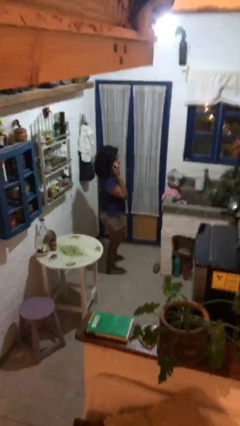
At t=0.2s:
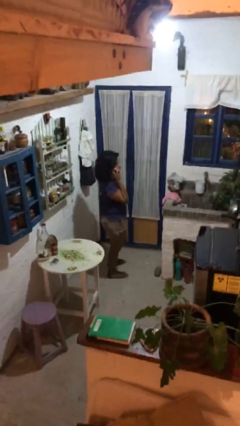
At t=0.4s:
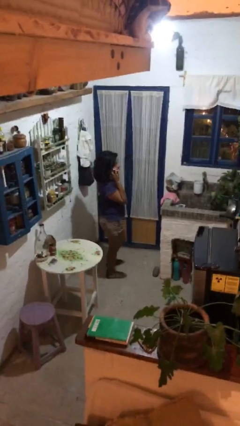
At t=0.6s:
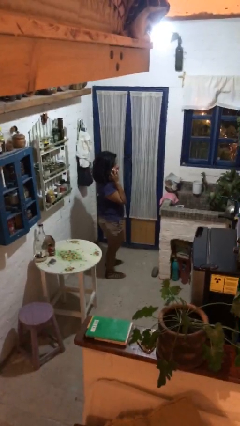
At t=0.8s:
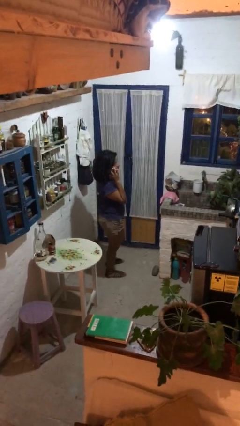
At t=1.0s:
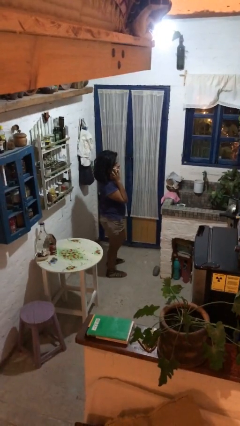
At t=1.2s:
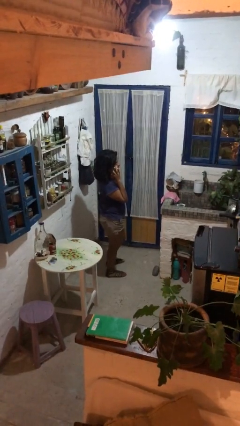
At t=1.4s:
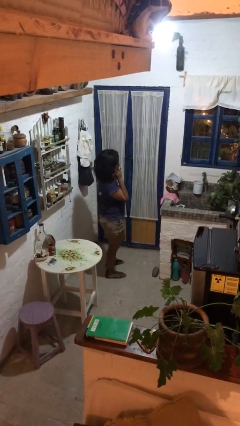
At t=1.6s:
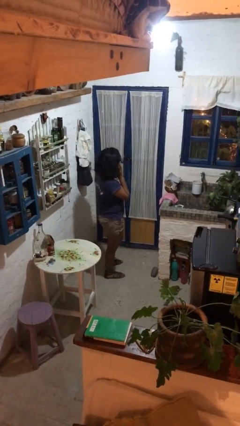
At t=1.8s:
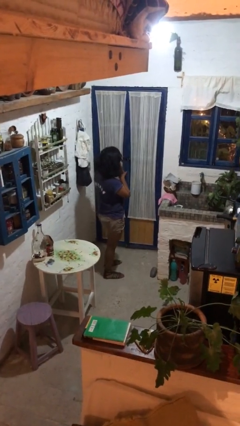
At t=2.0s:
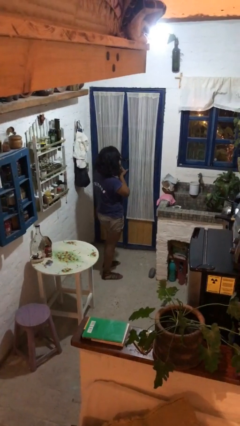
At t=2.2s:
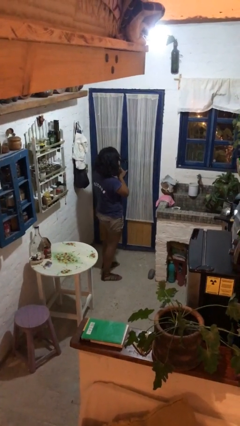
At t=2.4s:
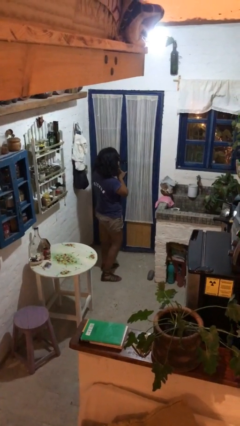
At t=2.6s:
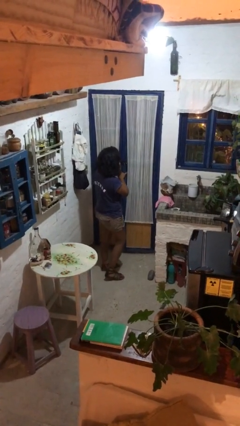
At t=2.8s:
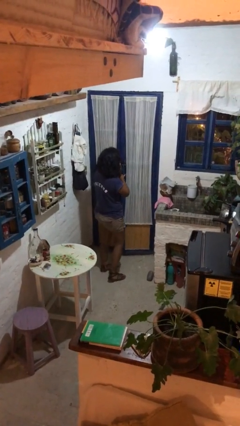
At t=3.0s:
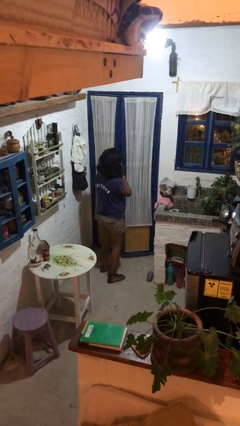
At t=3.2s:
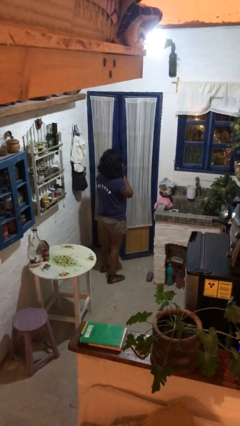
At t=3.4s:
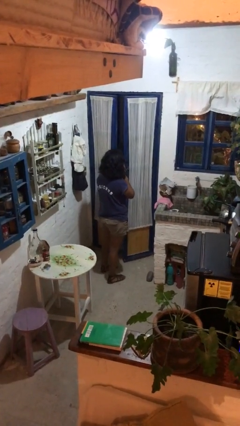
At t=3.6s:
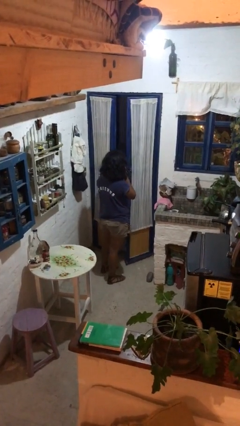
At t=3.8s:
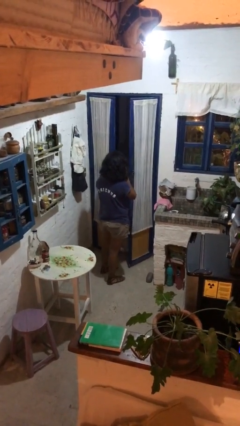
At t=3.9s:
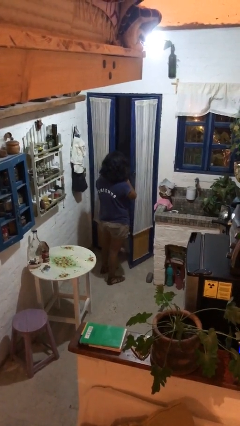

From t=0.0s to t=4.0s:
person opens facility door

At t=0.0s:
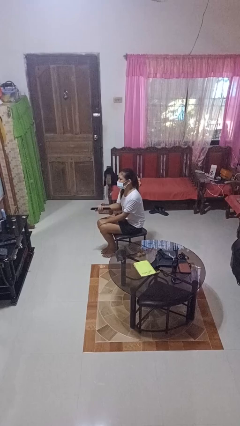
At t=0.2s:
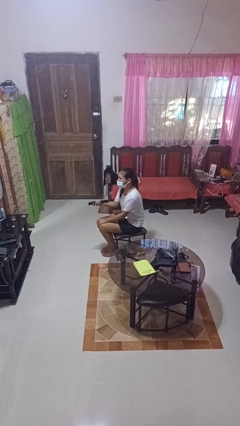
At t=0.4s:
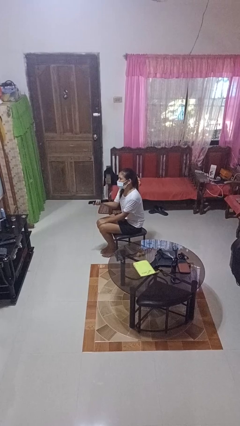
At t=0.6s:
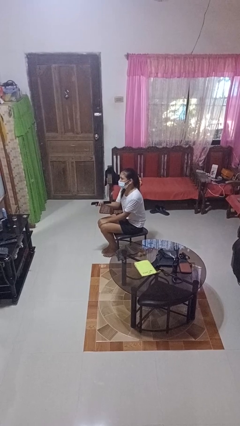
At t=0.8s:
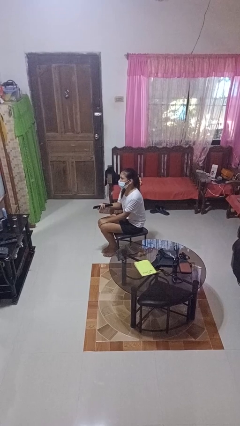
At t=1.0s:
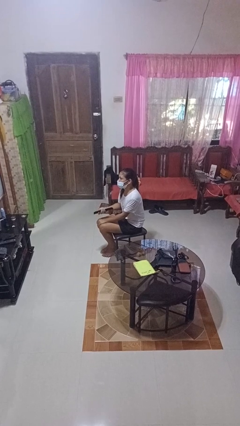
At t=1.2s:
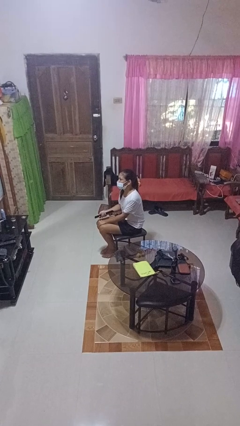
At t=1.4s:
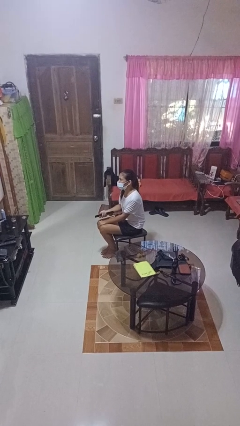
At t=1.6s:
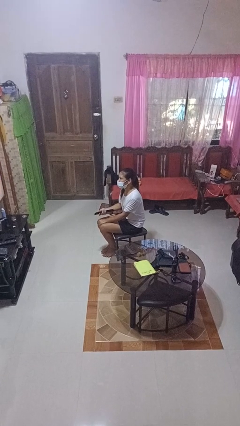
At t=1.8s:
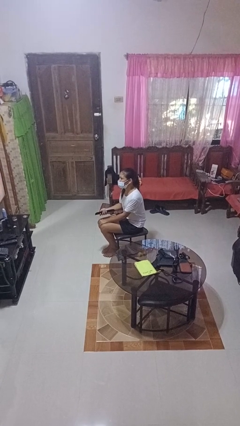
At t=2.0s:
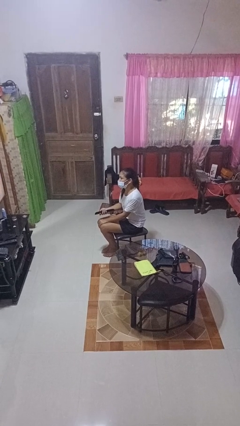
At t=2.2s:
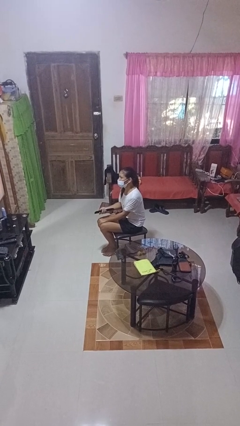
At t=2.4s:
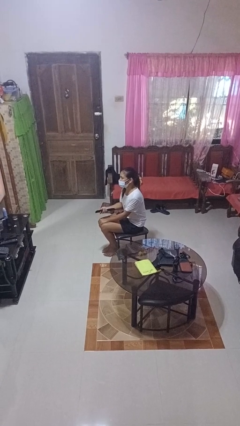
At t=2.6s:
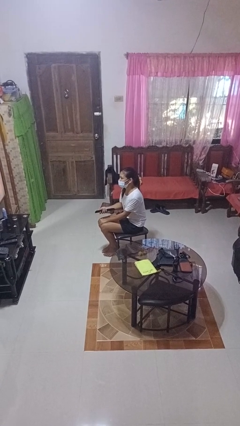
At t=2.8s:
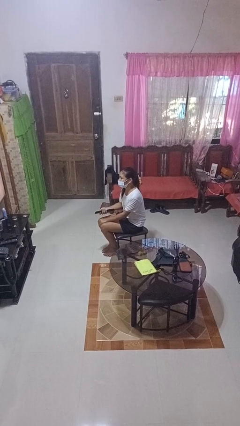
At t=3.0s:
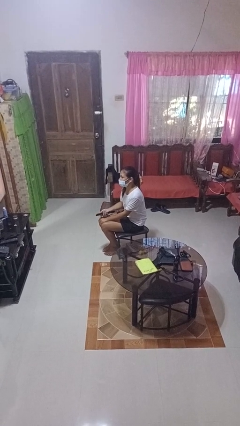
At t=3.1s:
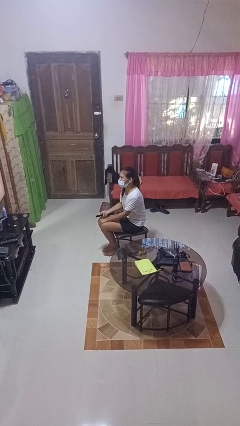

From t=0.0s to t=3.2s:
person uses television remote

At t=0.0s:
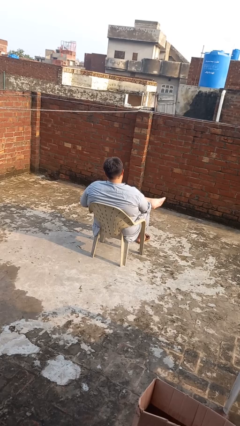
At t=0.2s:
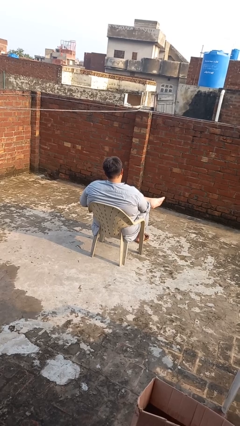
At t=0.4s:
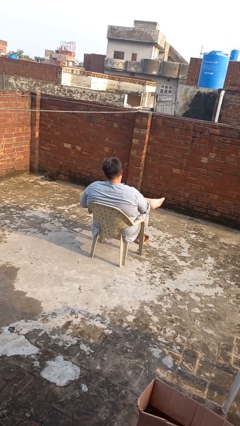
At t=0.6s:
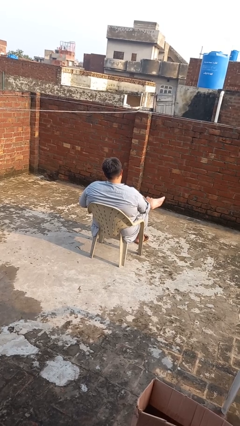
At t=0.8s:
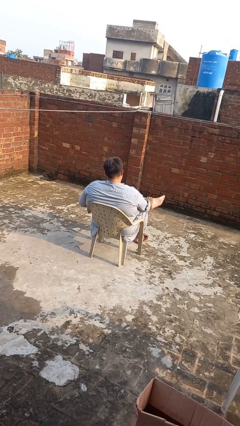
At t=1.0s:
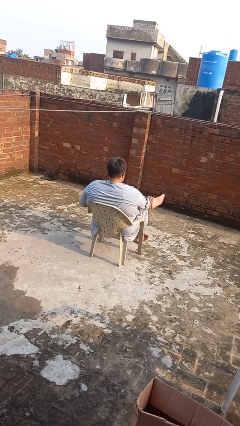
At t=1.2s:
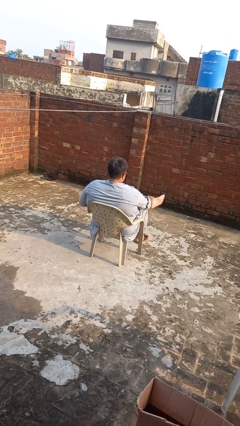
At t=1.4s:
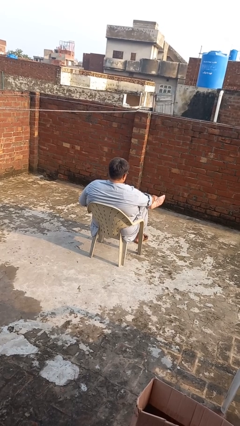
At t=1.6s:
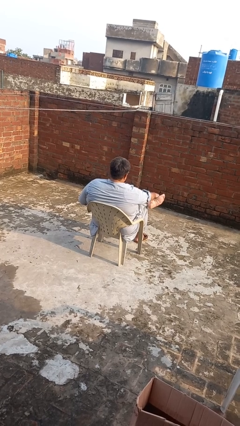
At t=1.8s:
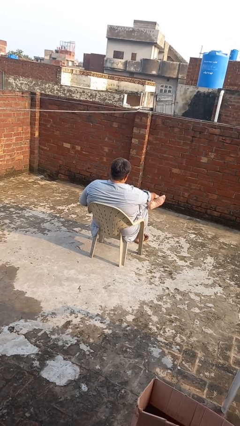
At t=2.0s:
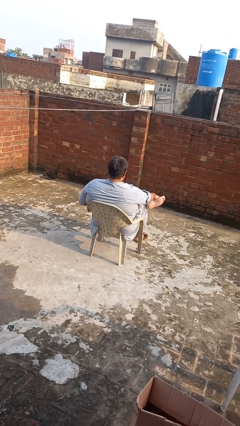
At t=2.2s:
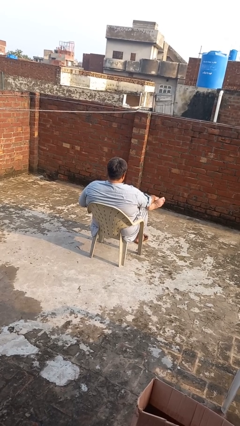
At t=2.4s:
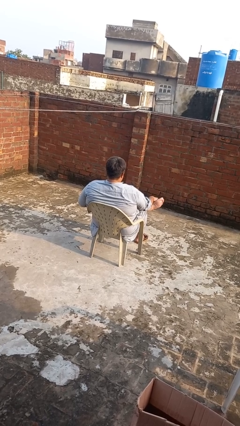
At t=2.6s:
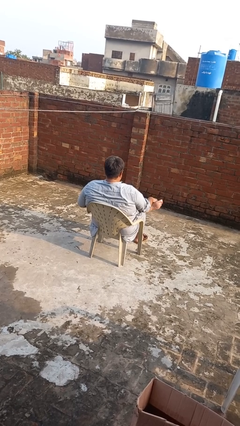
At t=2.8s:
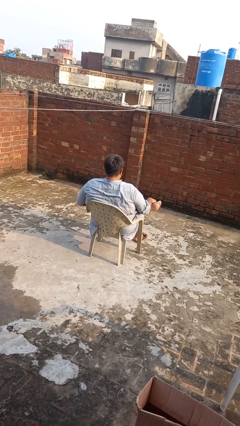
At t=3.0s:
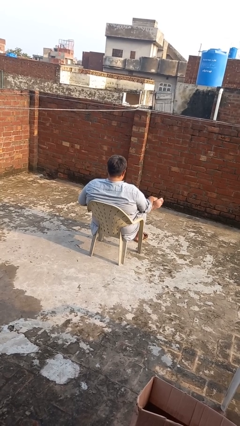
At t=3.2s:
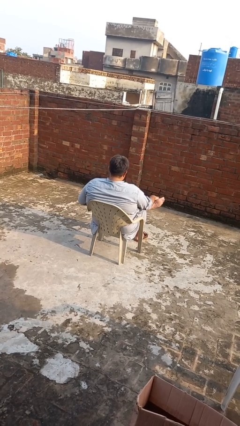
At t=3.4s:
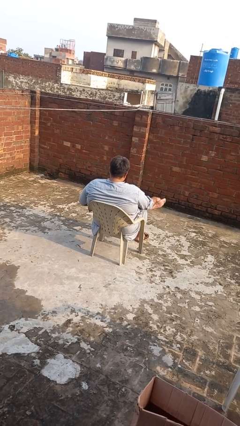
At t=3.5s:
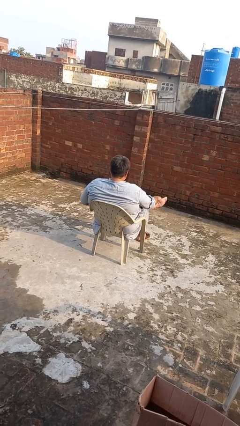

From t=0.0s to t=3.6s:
person rubs foot

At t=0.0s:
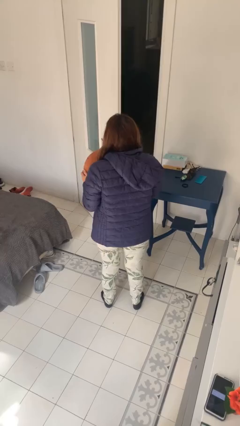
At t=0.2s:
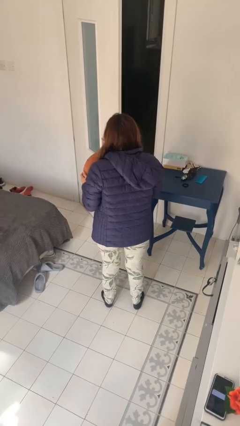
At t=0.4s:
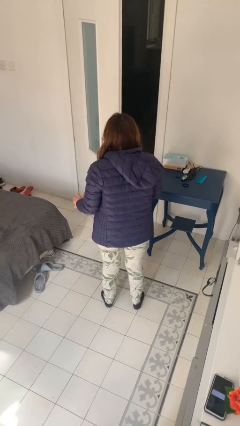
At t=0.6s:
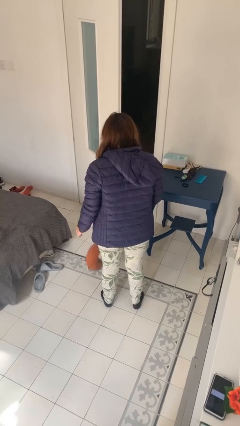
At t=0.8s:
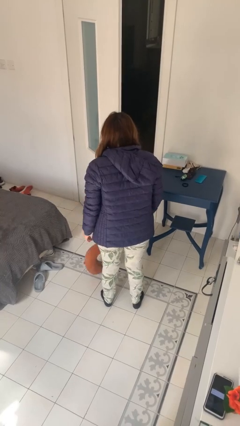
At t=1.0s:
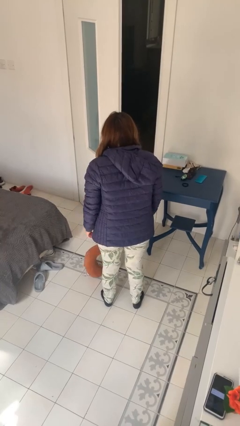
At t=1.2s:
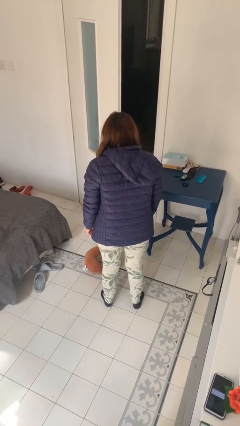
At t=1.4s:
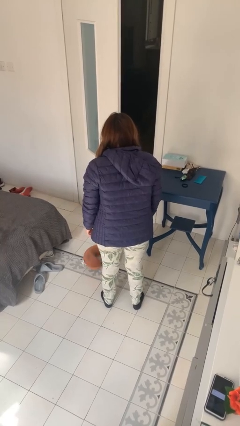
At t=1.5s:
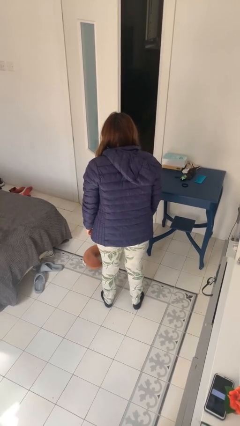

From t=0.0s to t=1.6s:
person throws object into air

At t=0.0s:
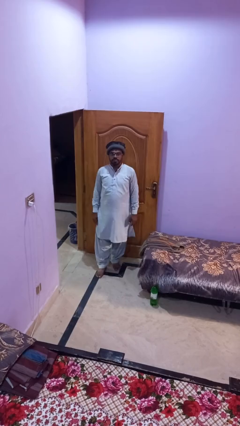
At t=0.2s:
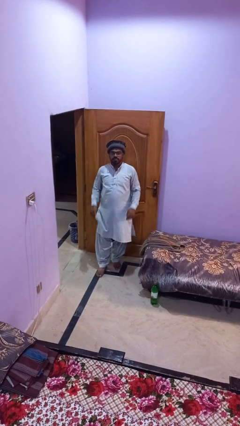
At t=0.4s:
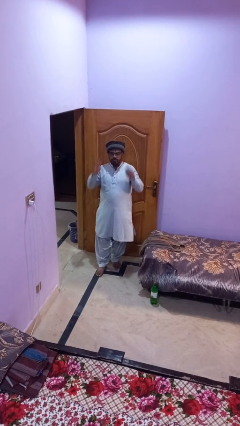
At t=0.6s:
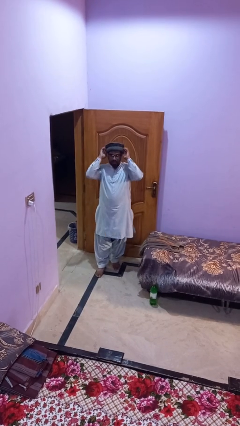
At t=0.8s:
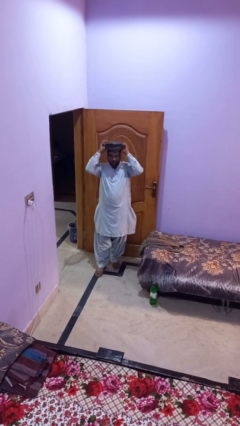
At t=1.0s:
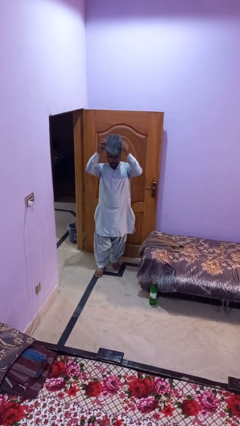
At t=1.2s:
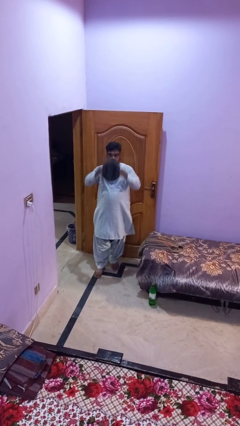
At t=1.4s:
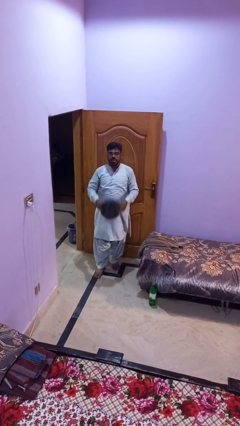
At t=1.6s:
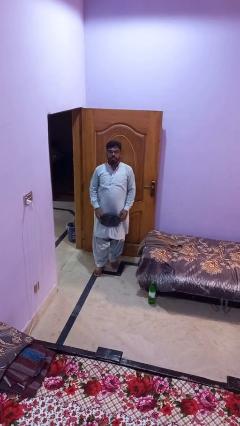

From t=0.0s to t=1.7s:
person takes off hat

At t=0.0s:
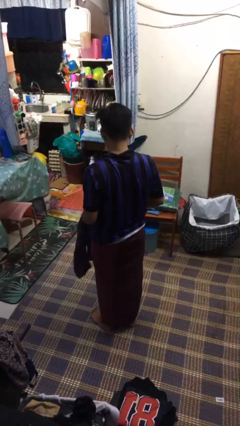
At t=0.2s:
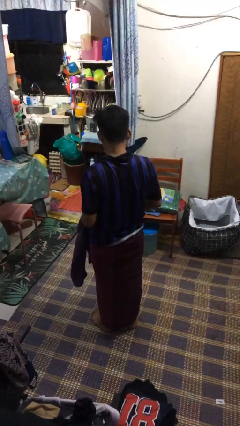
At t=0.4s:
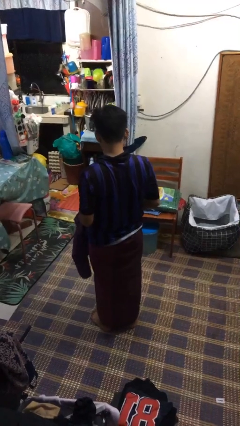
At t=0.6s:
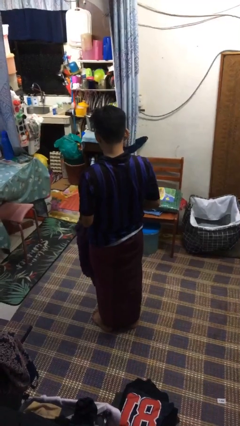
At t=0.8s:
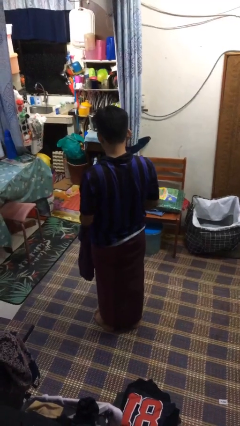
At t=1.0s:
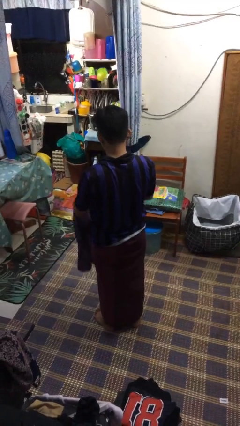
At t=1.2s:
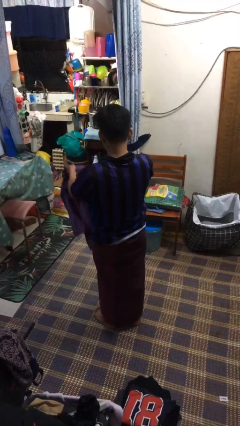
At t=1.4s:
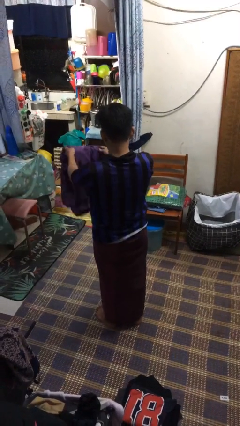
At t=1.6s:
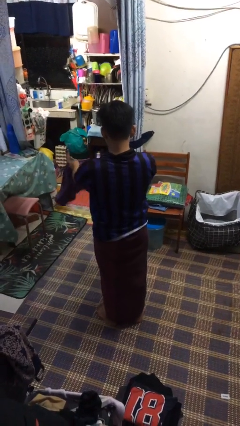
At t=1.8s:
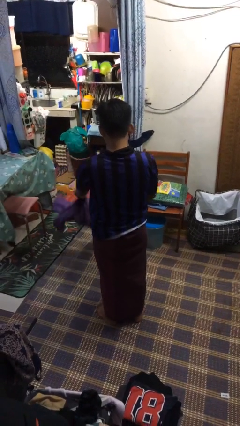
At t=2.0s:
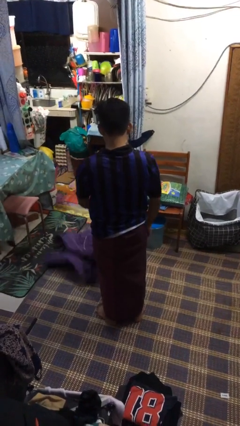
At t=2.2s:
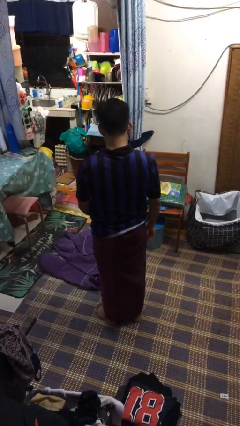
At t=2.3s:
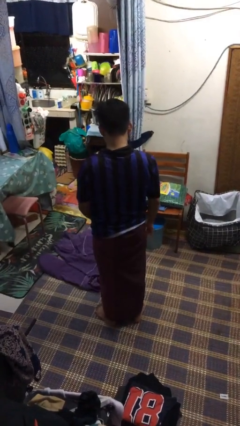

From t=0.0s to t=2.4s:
person throws object to ground

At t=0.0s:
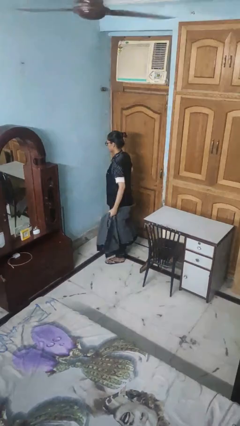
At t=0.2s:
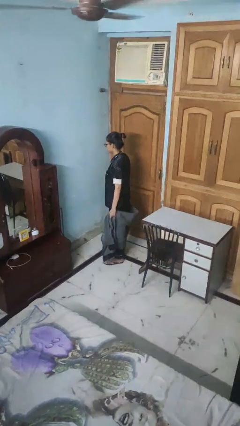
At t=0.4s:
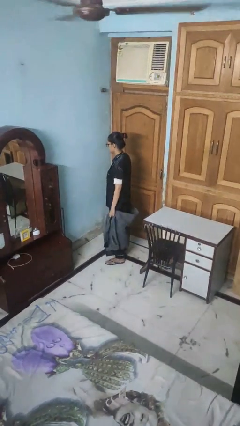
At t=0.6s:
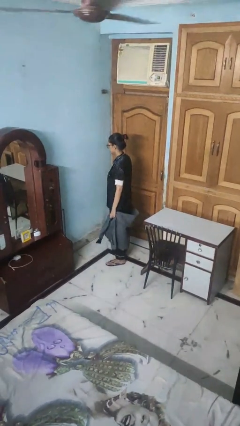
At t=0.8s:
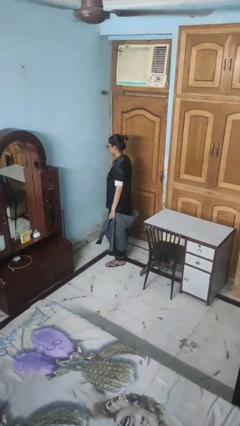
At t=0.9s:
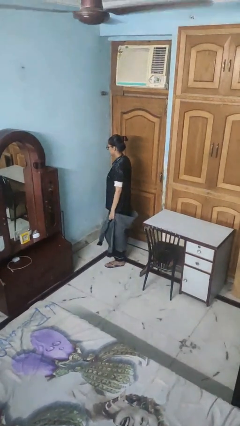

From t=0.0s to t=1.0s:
person unties jacket around waist
